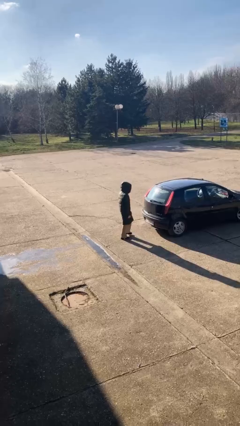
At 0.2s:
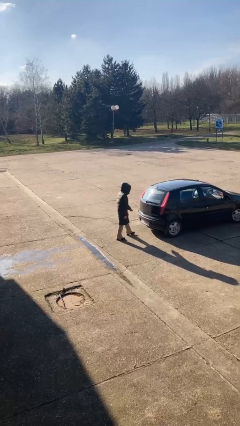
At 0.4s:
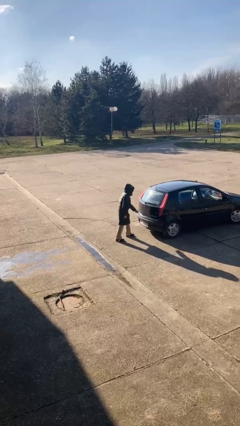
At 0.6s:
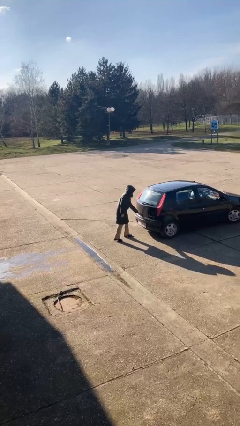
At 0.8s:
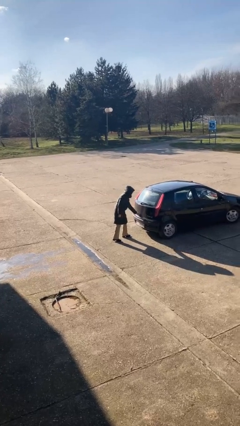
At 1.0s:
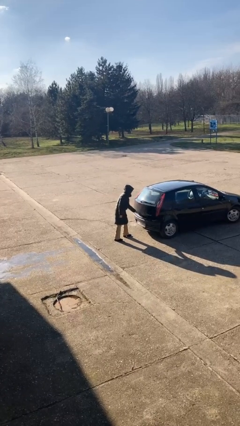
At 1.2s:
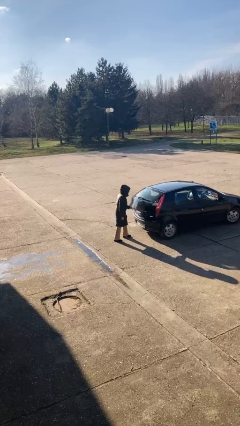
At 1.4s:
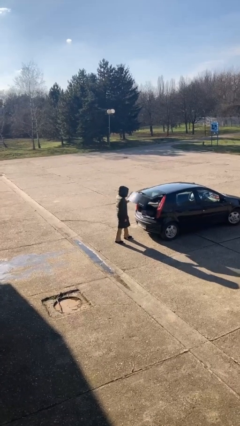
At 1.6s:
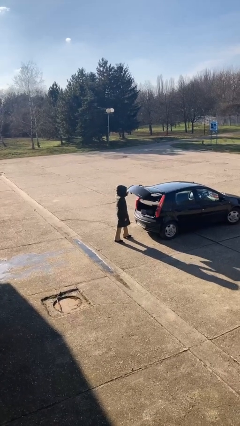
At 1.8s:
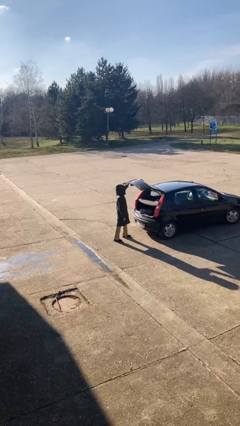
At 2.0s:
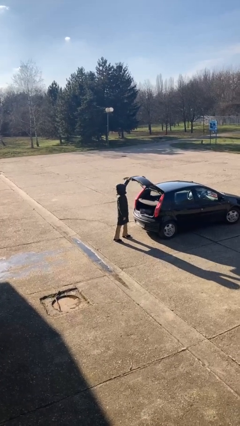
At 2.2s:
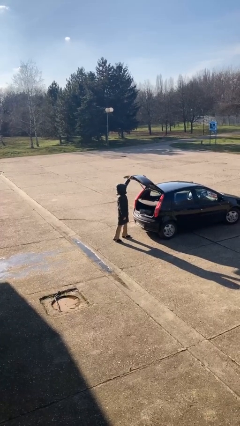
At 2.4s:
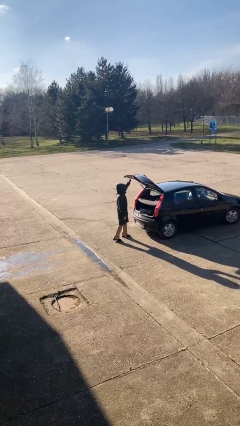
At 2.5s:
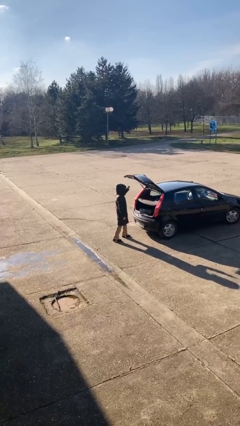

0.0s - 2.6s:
person opens car trunk

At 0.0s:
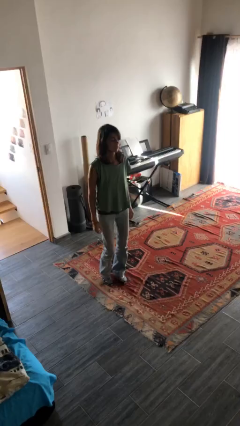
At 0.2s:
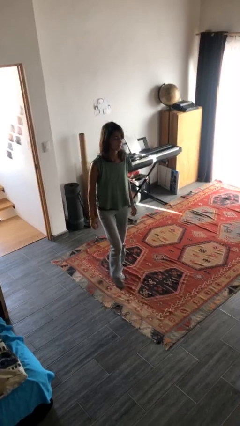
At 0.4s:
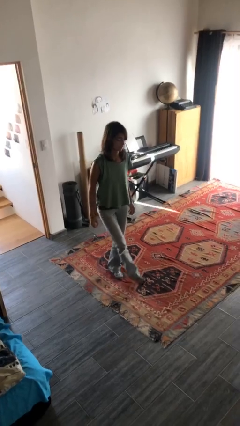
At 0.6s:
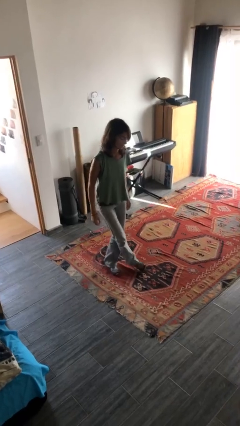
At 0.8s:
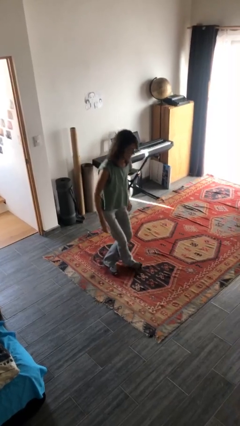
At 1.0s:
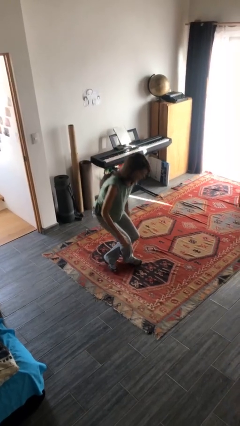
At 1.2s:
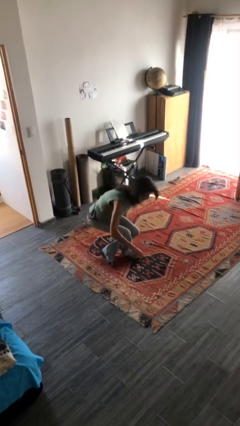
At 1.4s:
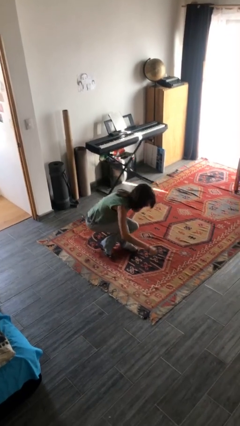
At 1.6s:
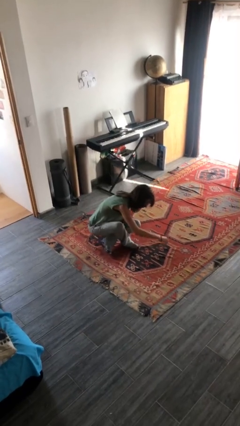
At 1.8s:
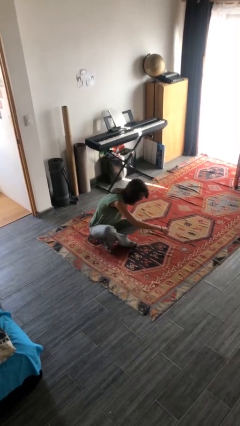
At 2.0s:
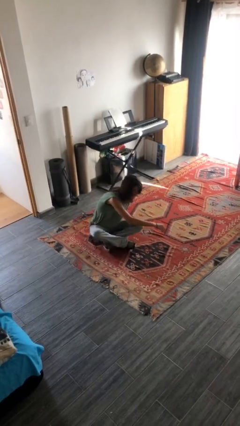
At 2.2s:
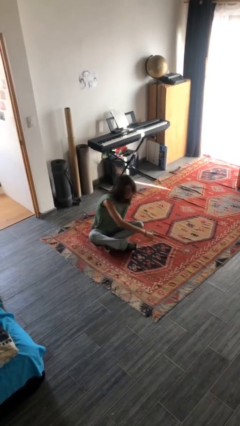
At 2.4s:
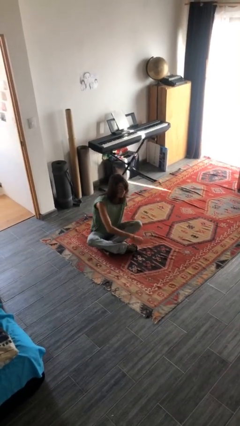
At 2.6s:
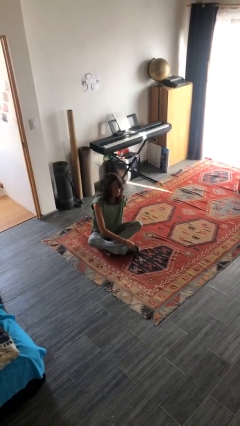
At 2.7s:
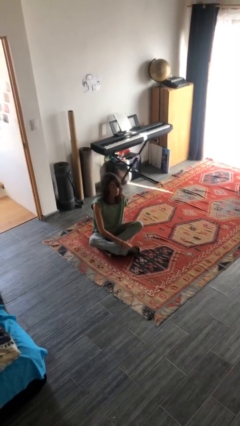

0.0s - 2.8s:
person sits crisscross

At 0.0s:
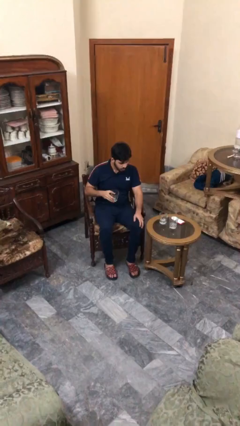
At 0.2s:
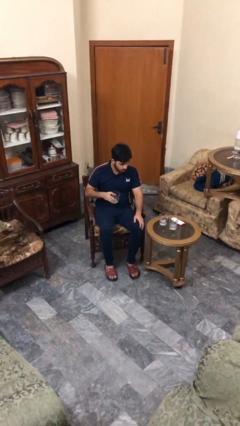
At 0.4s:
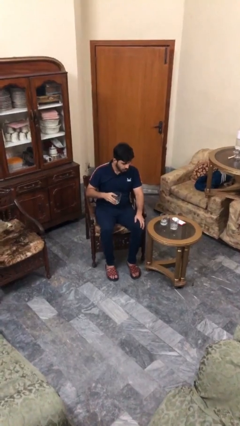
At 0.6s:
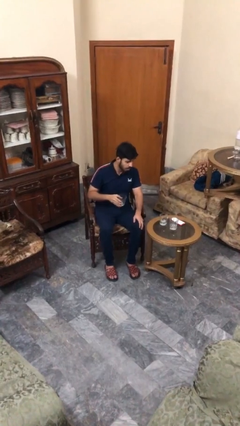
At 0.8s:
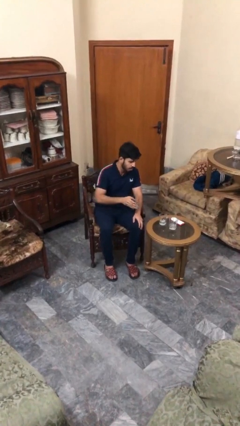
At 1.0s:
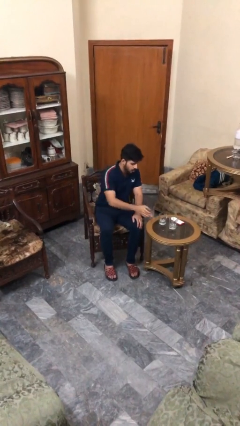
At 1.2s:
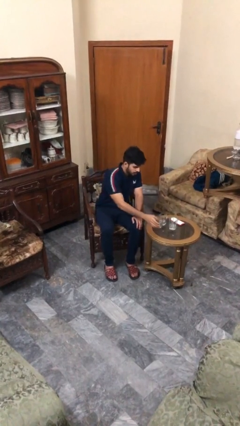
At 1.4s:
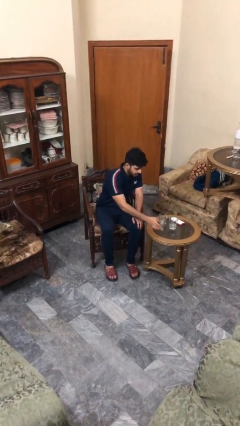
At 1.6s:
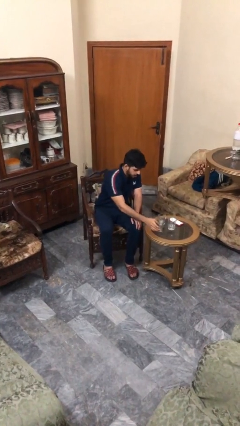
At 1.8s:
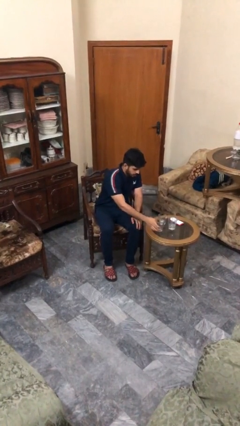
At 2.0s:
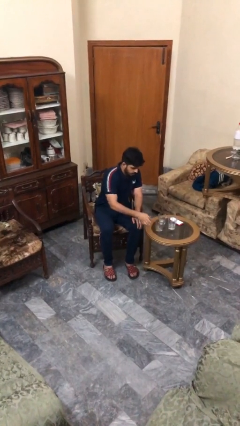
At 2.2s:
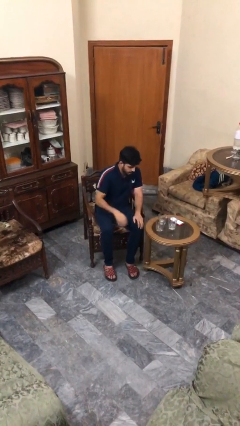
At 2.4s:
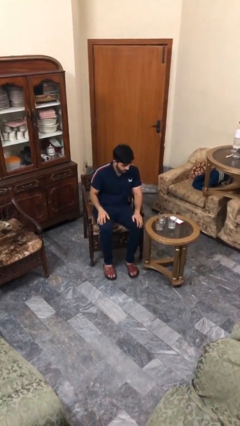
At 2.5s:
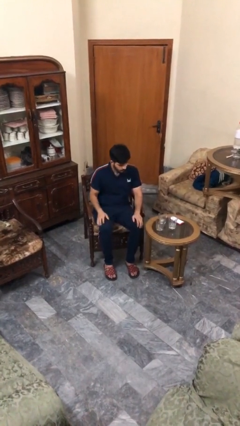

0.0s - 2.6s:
person puts down object on table

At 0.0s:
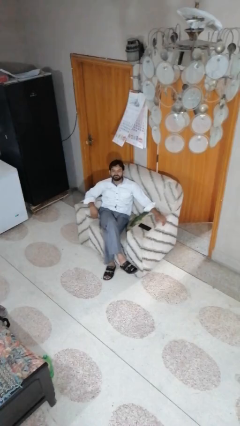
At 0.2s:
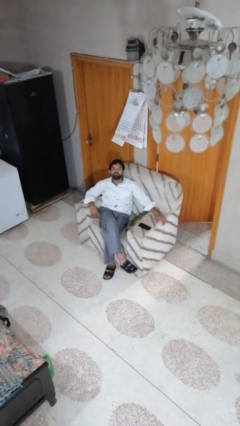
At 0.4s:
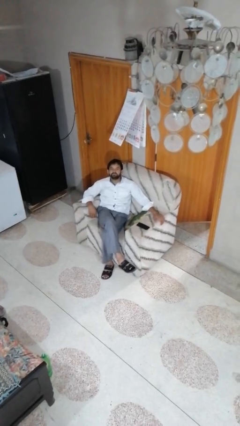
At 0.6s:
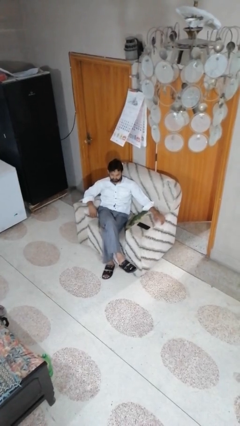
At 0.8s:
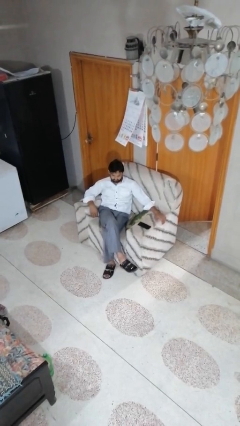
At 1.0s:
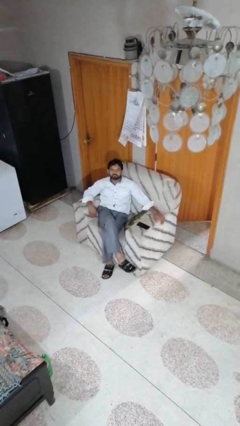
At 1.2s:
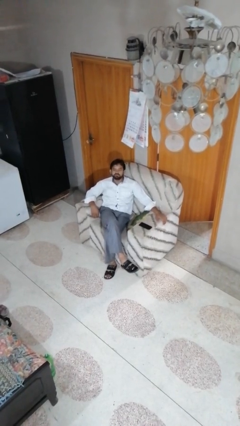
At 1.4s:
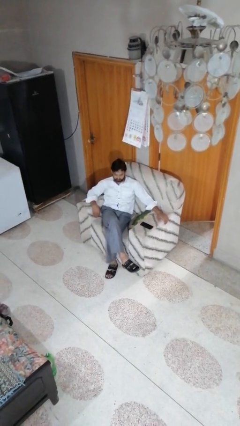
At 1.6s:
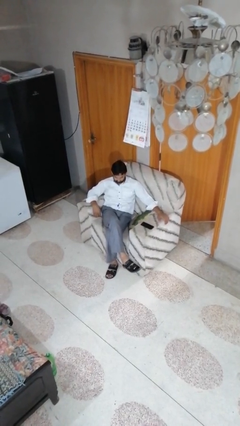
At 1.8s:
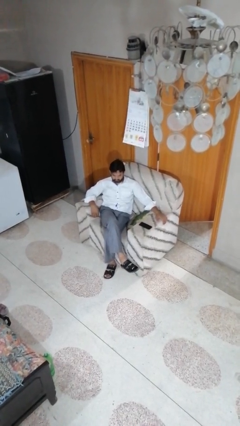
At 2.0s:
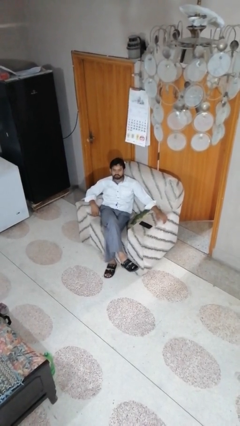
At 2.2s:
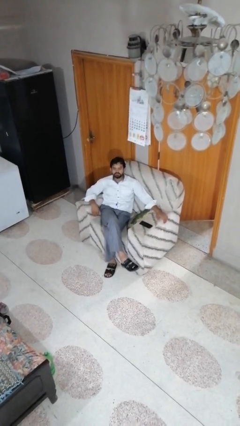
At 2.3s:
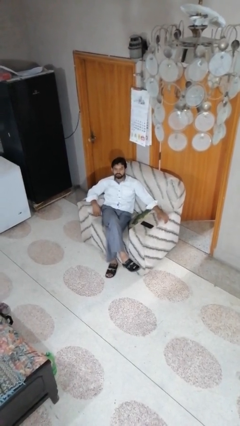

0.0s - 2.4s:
person nods head

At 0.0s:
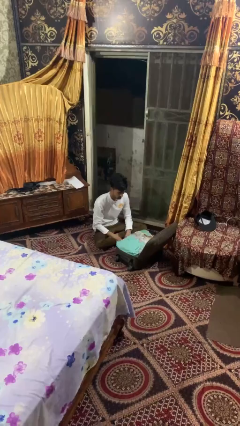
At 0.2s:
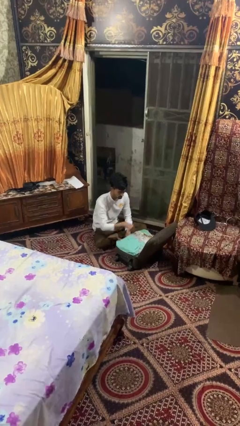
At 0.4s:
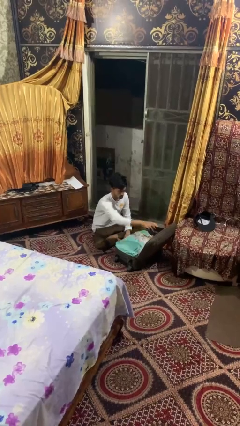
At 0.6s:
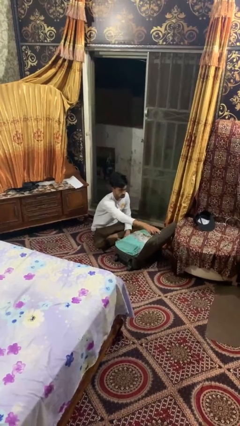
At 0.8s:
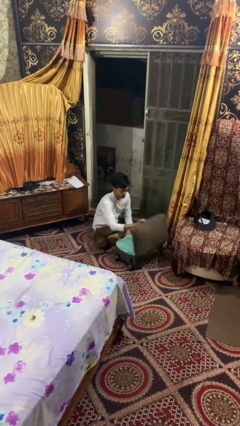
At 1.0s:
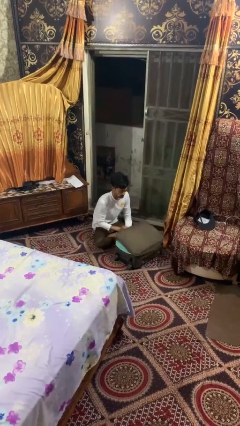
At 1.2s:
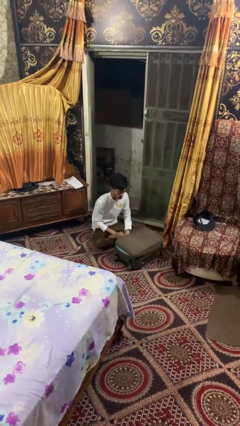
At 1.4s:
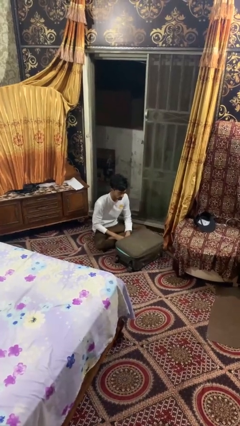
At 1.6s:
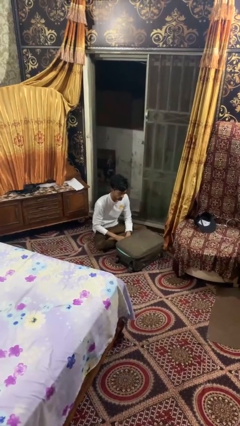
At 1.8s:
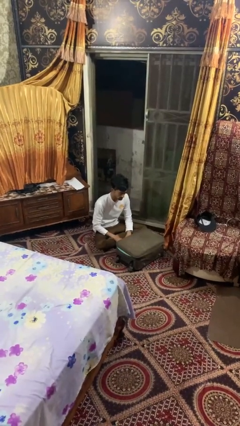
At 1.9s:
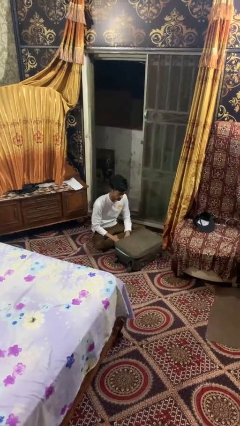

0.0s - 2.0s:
person closes suitcase

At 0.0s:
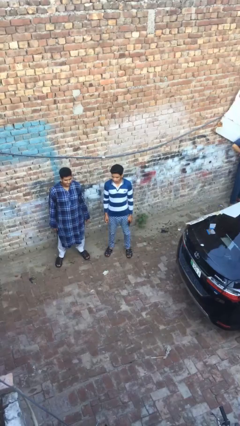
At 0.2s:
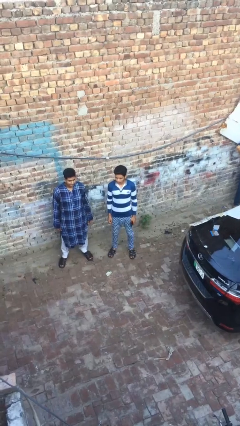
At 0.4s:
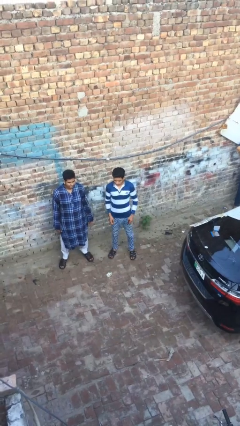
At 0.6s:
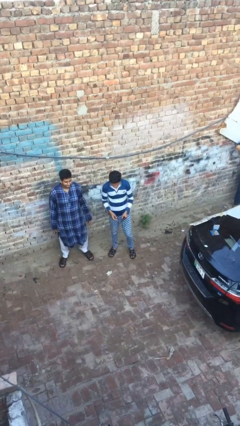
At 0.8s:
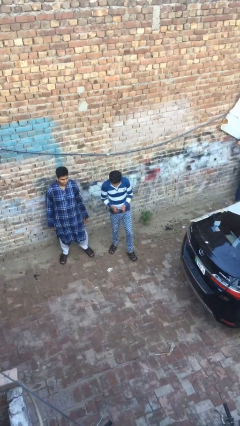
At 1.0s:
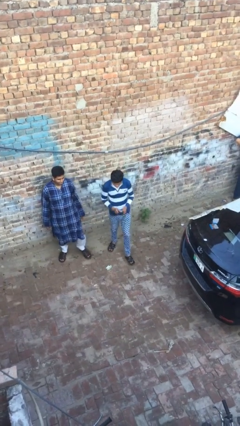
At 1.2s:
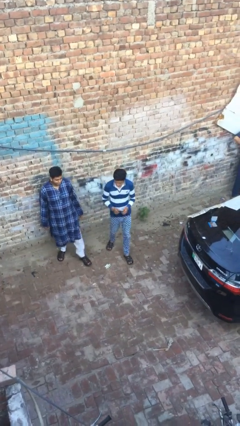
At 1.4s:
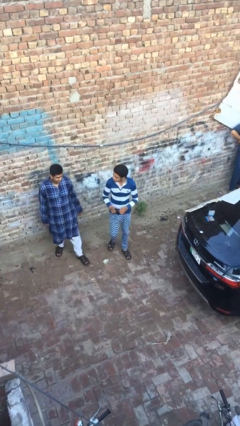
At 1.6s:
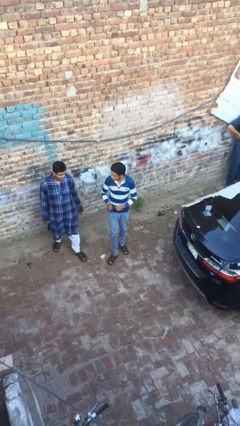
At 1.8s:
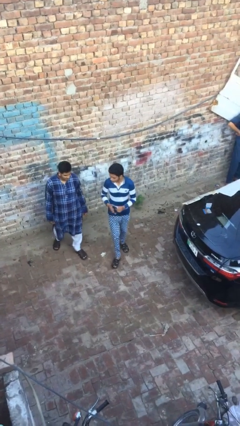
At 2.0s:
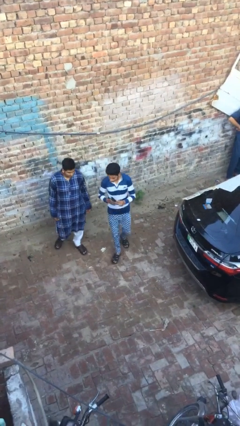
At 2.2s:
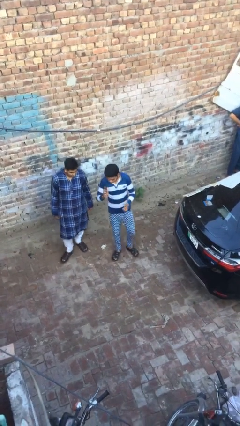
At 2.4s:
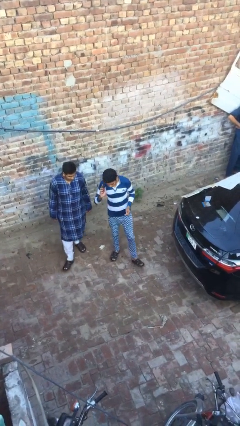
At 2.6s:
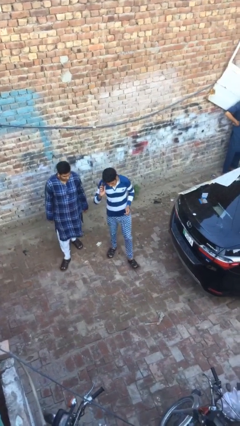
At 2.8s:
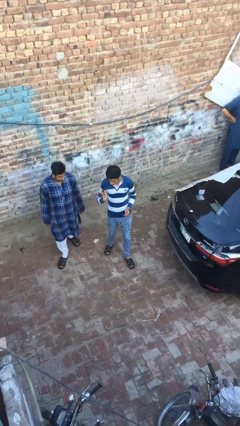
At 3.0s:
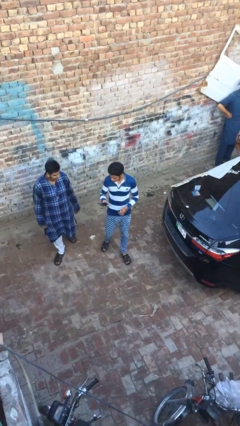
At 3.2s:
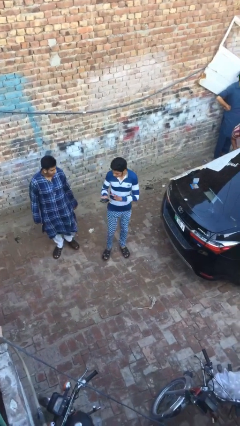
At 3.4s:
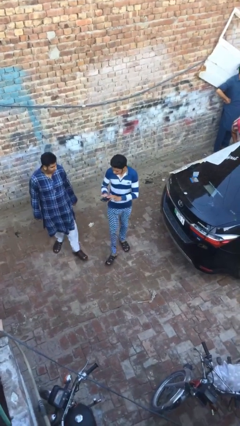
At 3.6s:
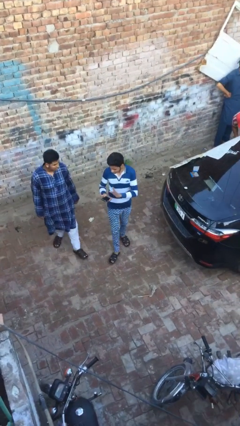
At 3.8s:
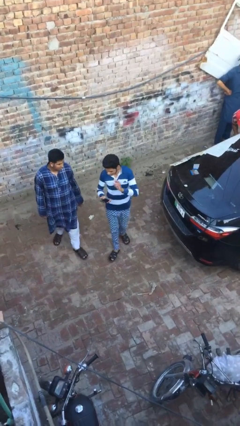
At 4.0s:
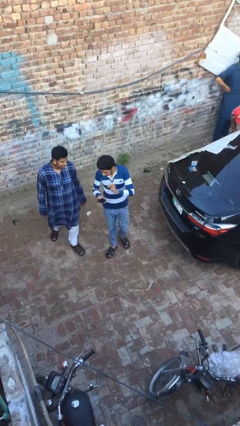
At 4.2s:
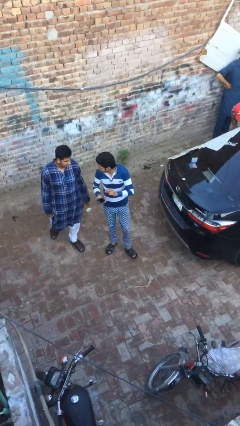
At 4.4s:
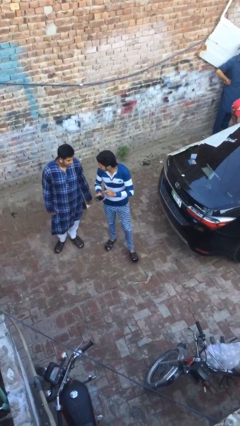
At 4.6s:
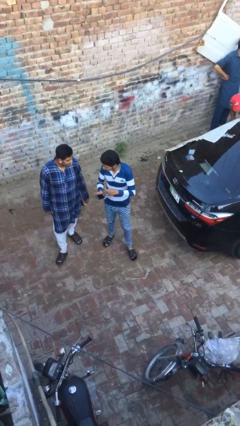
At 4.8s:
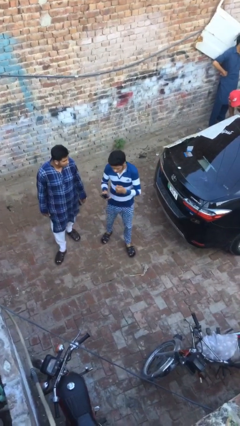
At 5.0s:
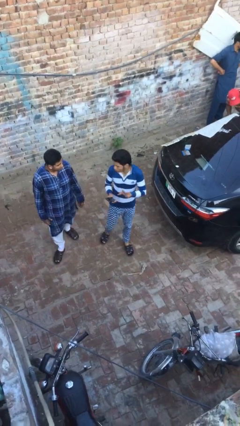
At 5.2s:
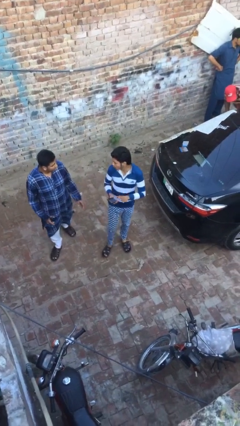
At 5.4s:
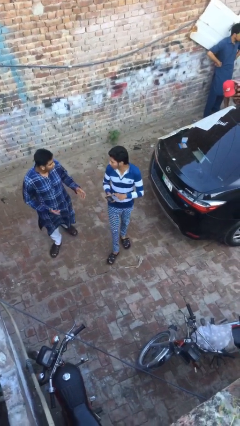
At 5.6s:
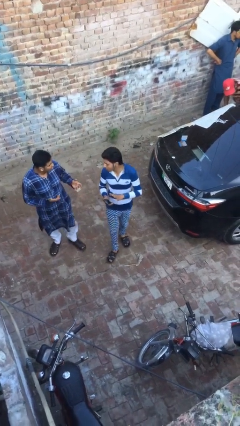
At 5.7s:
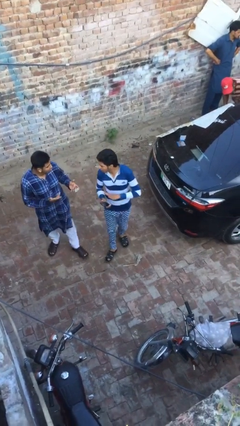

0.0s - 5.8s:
person talks to person
